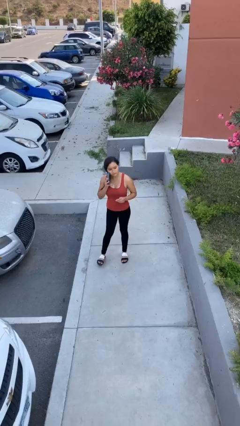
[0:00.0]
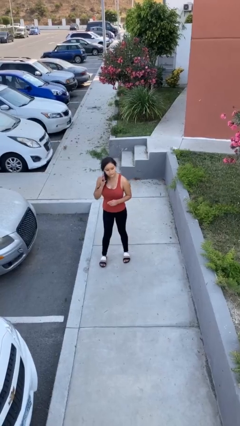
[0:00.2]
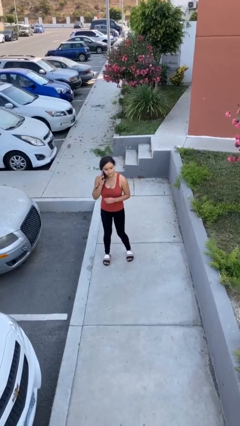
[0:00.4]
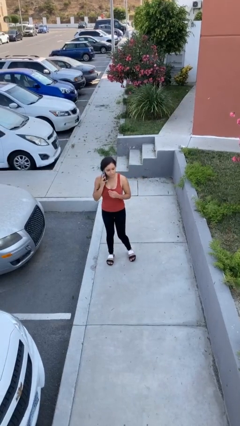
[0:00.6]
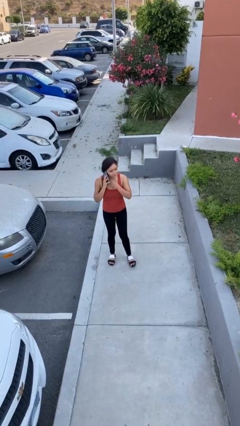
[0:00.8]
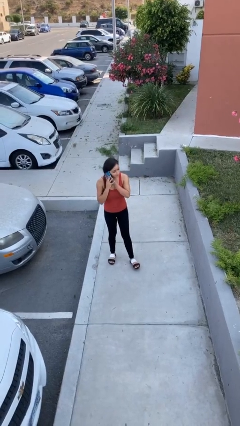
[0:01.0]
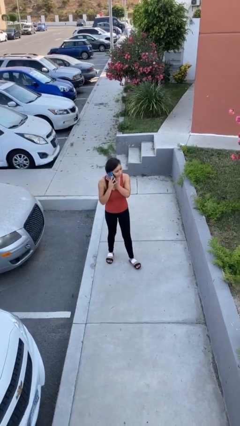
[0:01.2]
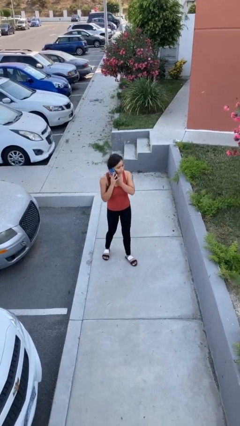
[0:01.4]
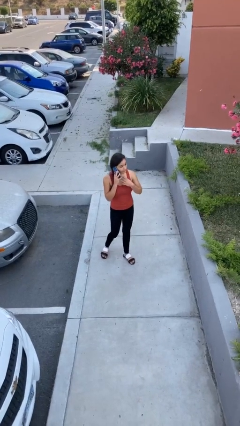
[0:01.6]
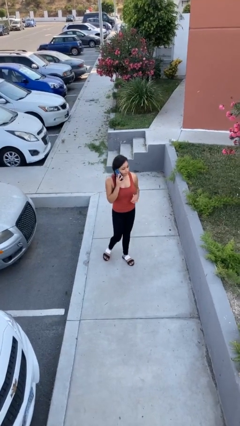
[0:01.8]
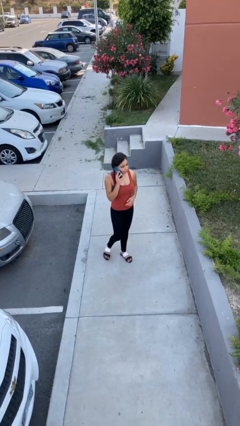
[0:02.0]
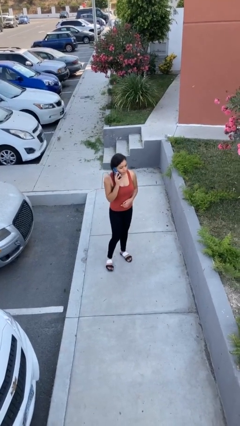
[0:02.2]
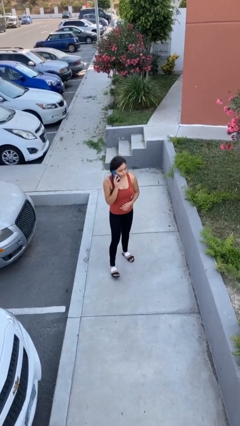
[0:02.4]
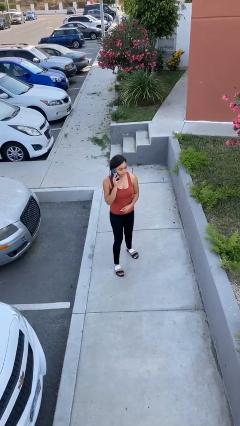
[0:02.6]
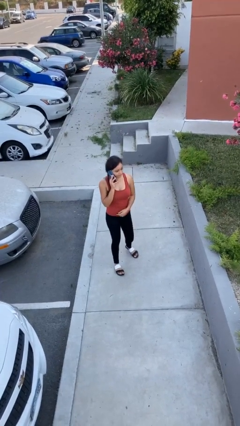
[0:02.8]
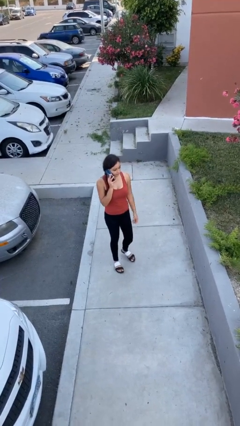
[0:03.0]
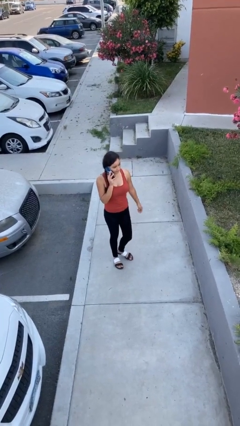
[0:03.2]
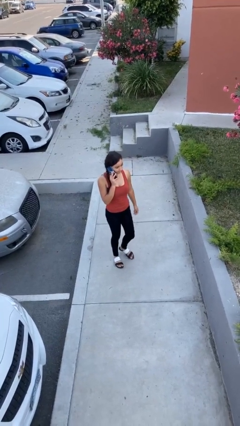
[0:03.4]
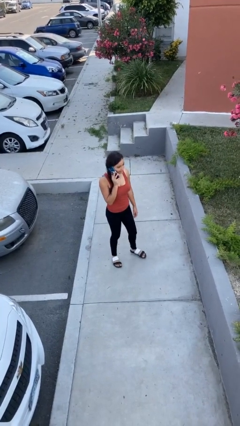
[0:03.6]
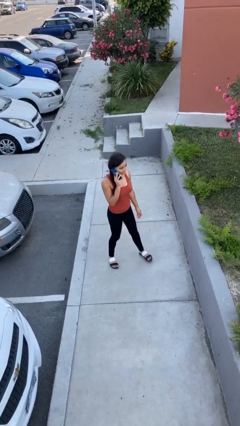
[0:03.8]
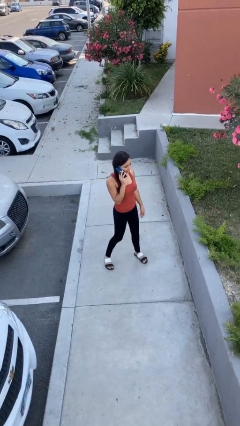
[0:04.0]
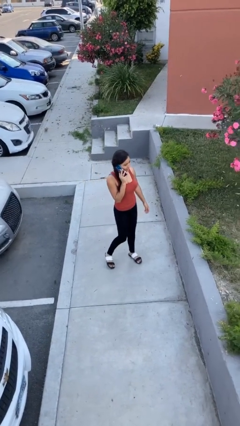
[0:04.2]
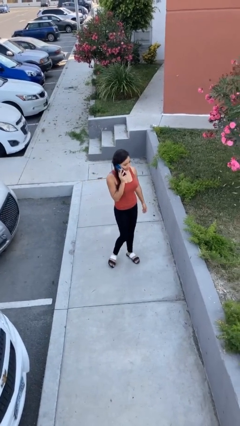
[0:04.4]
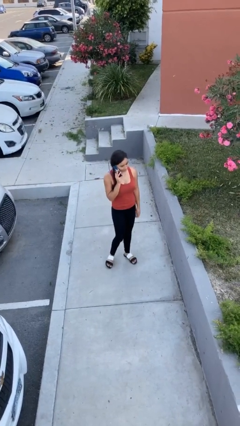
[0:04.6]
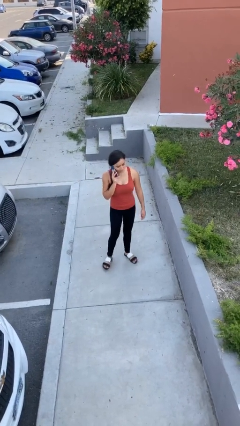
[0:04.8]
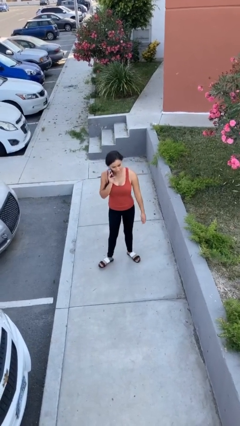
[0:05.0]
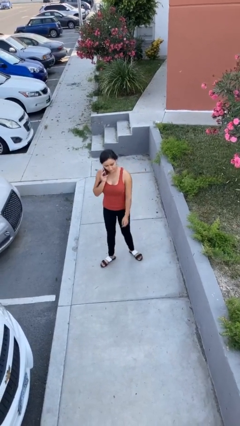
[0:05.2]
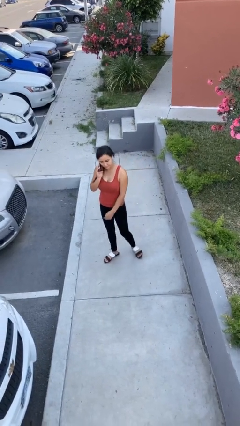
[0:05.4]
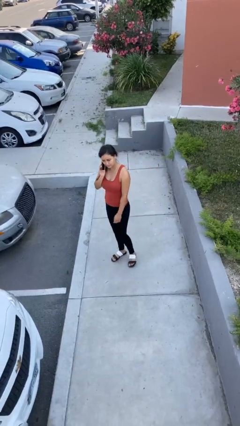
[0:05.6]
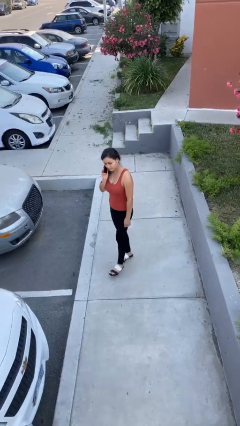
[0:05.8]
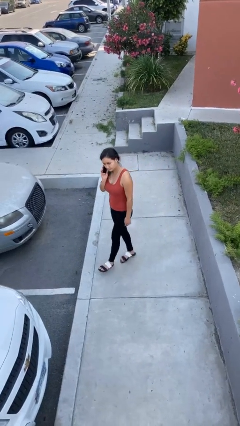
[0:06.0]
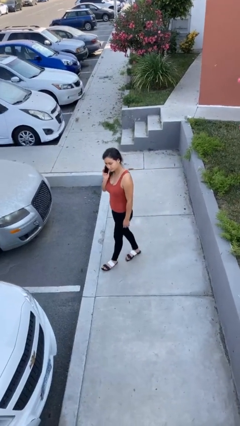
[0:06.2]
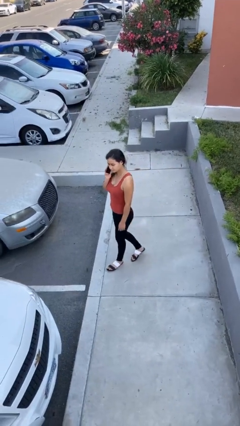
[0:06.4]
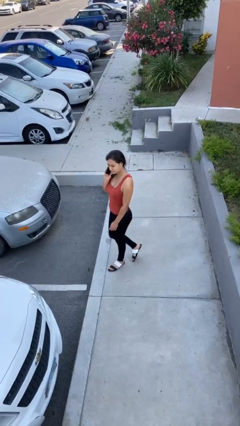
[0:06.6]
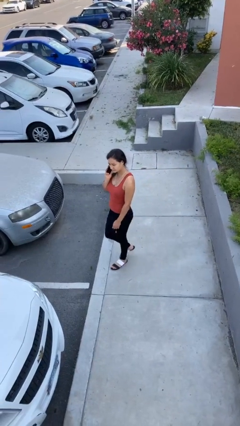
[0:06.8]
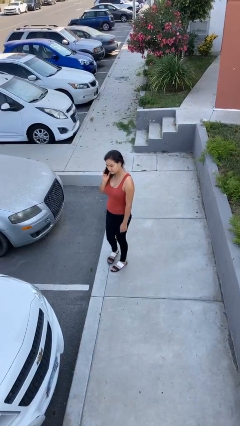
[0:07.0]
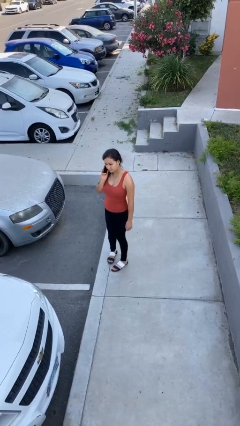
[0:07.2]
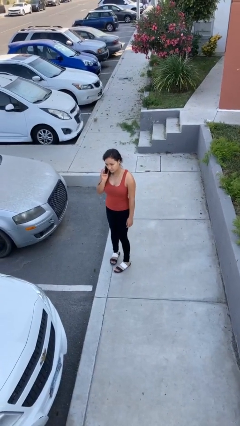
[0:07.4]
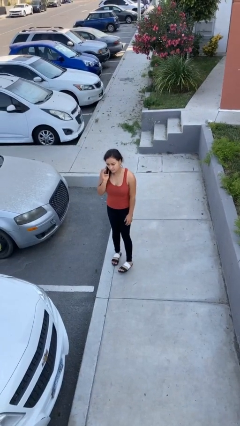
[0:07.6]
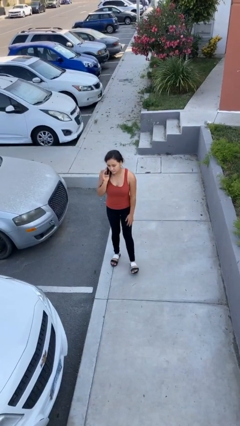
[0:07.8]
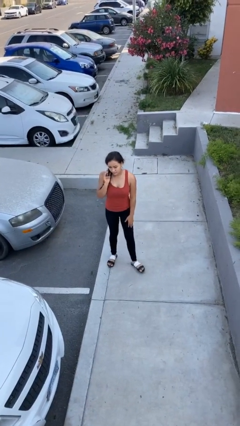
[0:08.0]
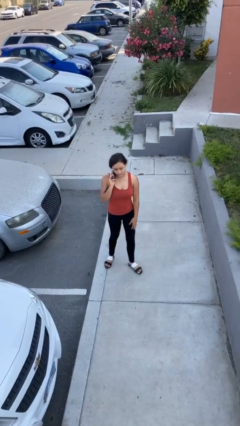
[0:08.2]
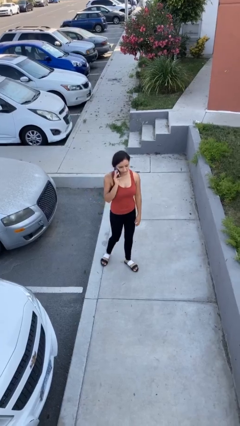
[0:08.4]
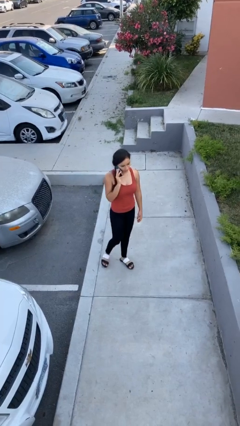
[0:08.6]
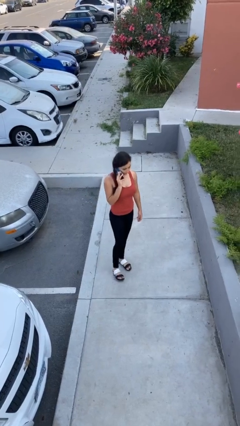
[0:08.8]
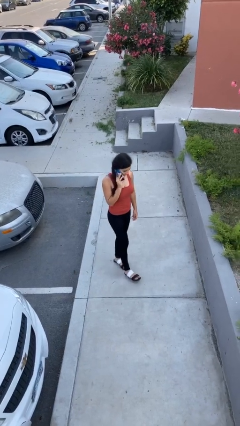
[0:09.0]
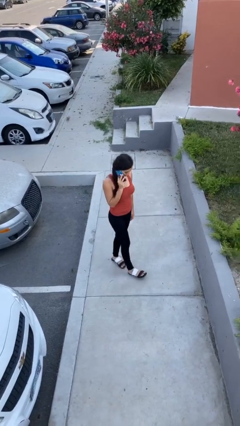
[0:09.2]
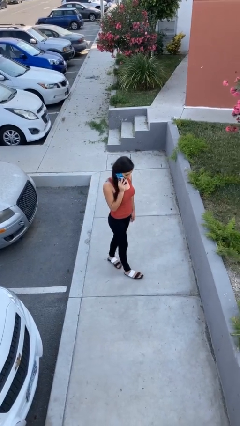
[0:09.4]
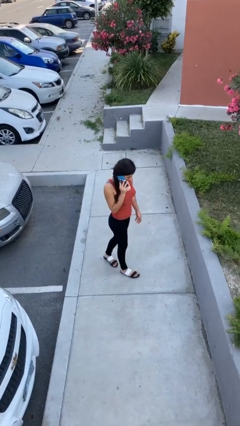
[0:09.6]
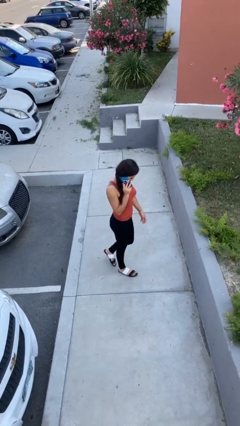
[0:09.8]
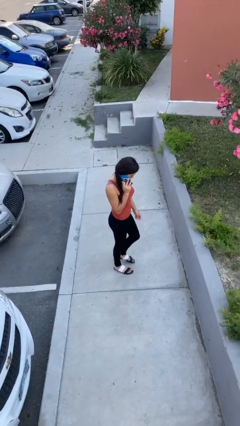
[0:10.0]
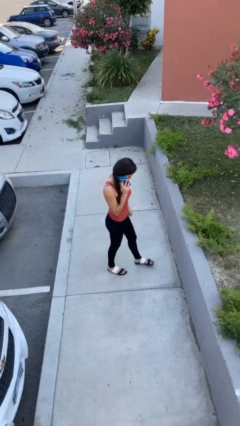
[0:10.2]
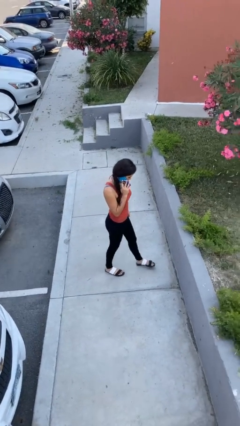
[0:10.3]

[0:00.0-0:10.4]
person talks on phone

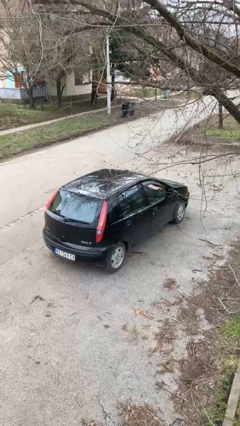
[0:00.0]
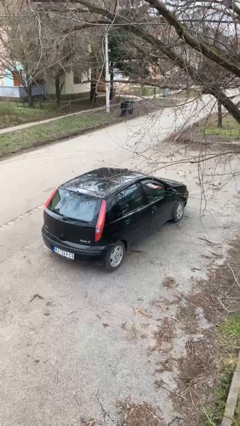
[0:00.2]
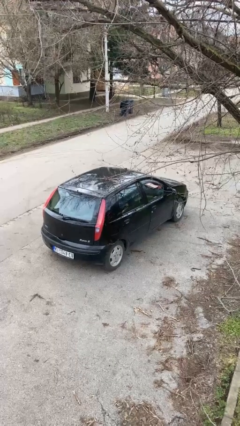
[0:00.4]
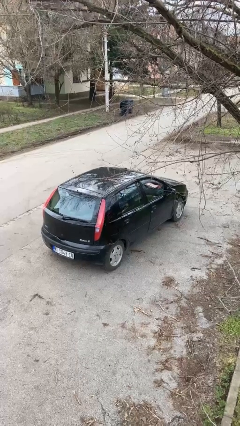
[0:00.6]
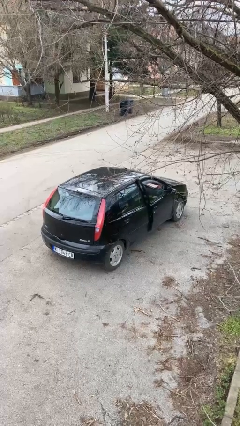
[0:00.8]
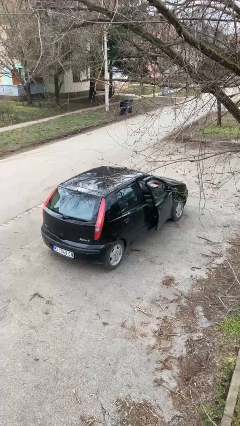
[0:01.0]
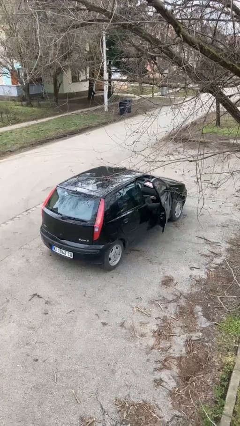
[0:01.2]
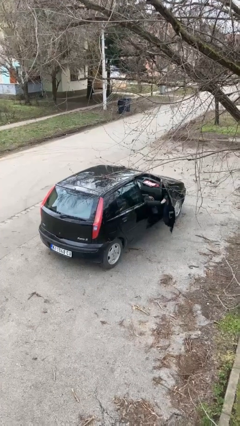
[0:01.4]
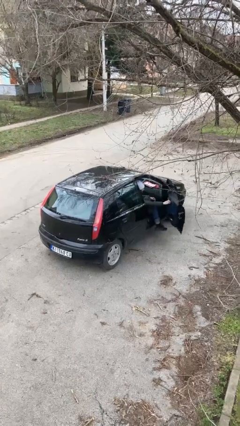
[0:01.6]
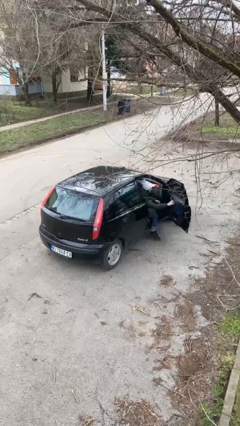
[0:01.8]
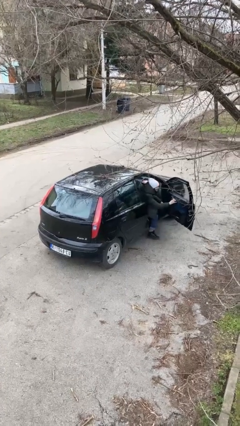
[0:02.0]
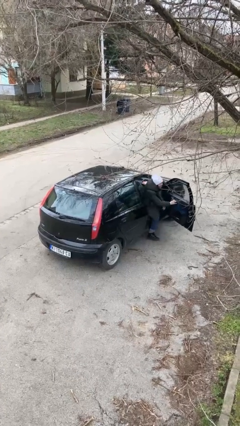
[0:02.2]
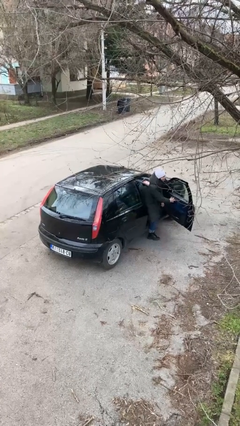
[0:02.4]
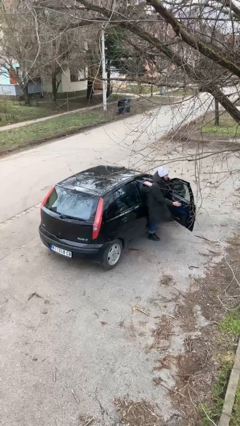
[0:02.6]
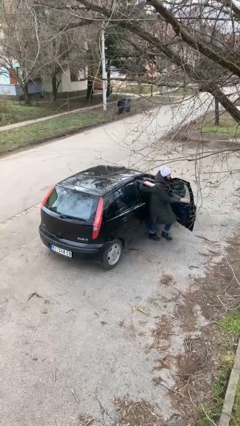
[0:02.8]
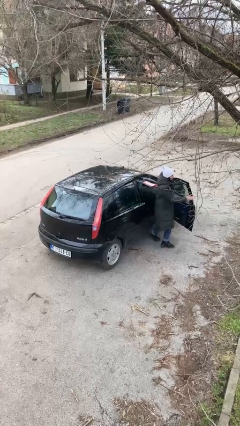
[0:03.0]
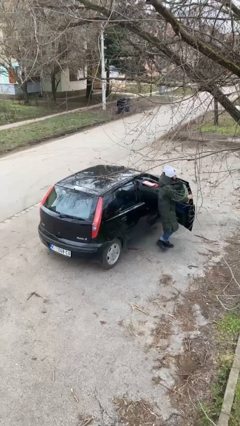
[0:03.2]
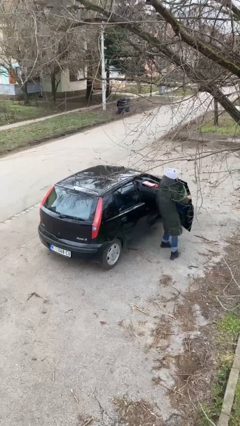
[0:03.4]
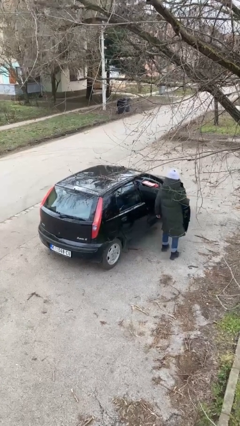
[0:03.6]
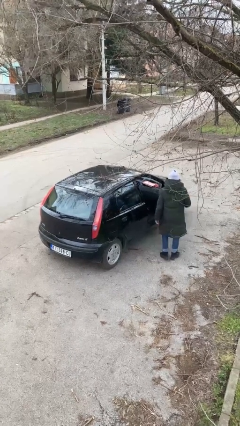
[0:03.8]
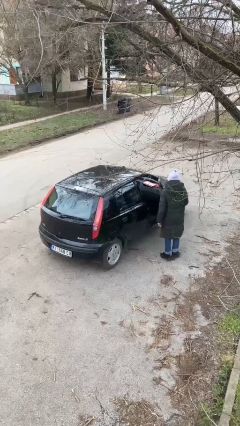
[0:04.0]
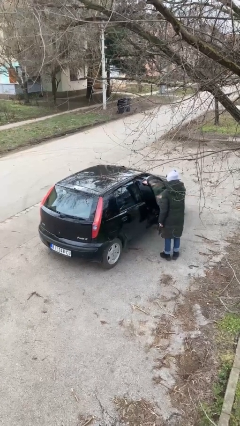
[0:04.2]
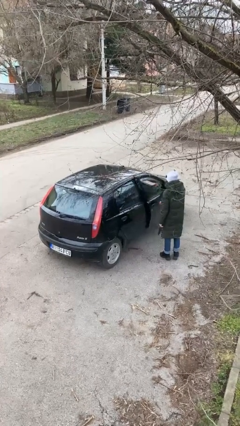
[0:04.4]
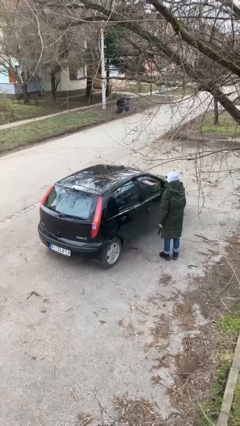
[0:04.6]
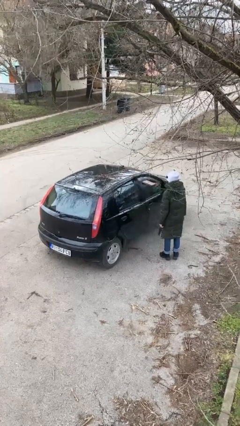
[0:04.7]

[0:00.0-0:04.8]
car drops off person

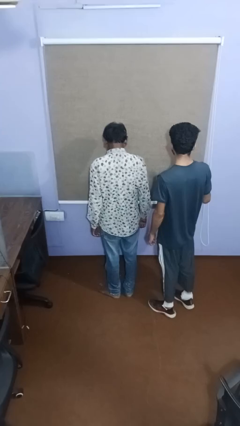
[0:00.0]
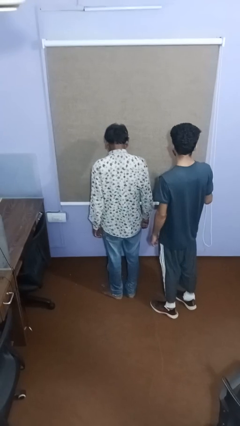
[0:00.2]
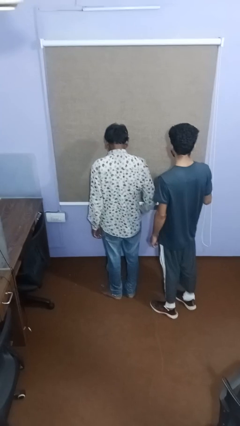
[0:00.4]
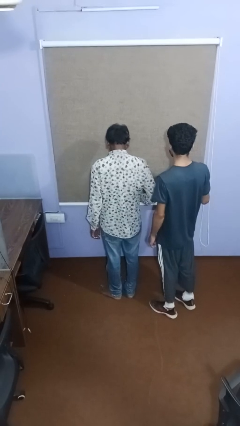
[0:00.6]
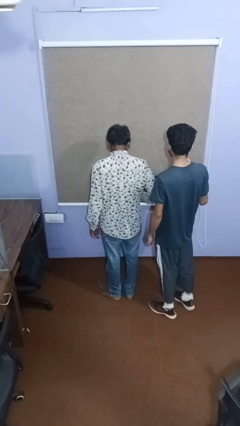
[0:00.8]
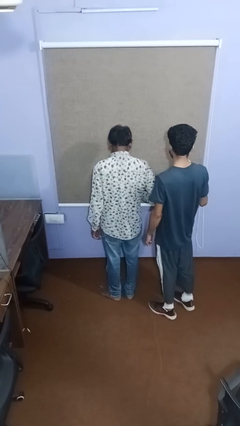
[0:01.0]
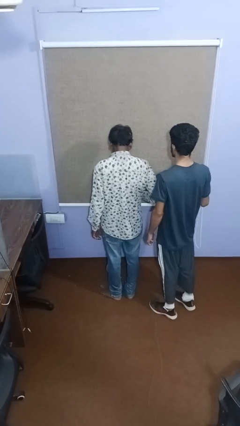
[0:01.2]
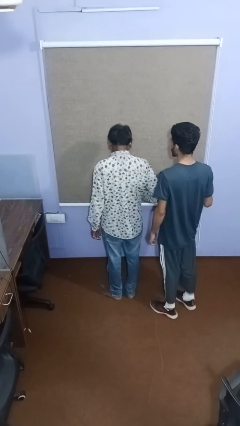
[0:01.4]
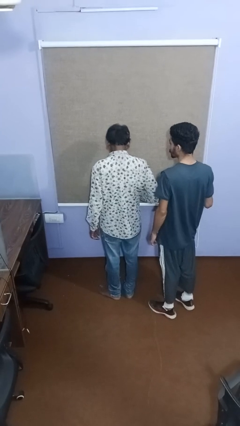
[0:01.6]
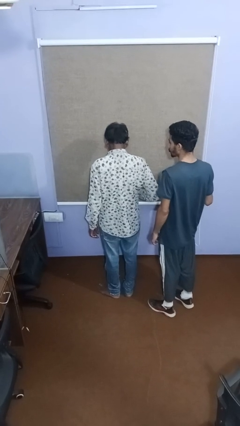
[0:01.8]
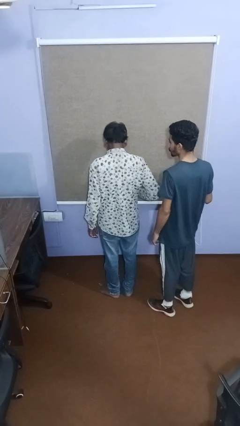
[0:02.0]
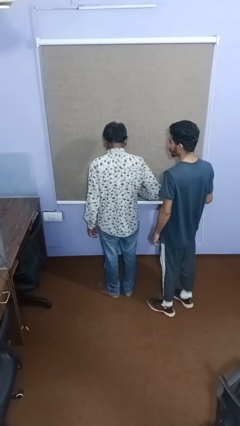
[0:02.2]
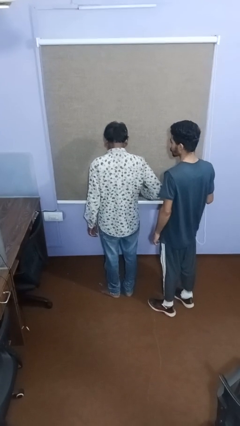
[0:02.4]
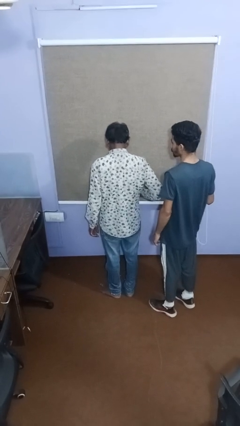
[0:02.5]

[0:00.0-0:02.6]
person nudges person with elbow

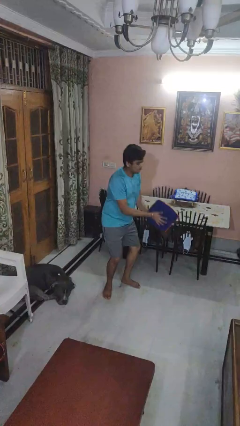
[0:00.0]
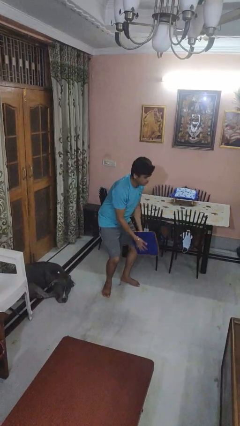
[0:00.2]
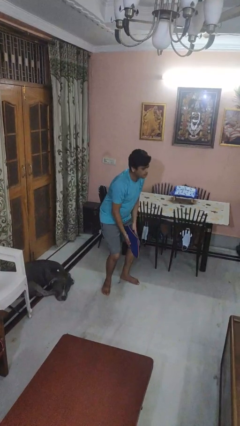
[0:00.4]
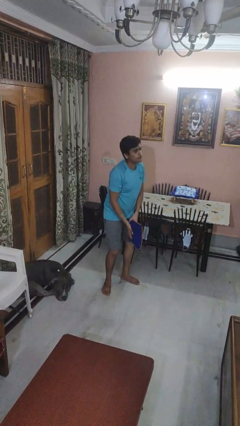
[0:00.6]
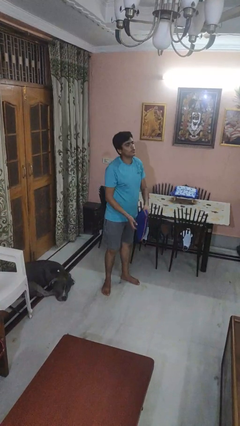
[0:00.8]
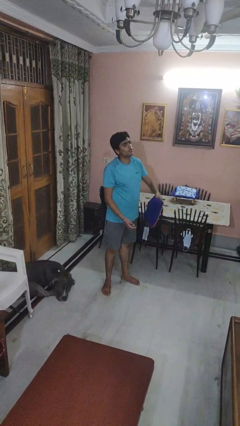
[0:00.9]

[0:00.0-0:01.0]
person catches dropped object
